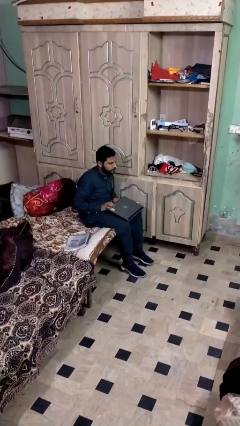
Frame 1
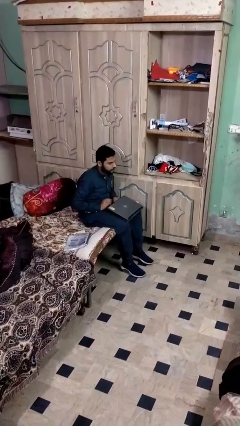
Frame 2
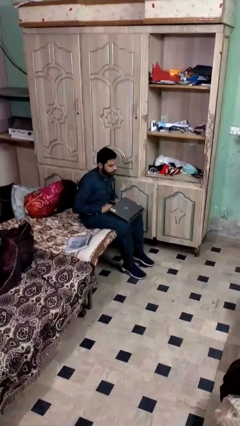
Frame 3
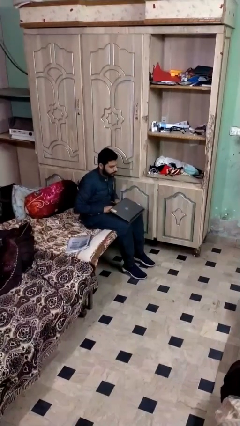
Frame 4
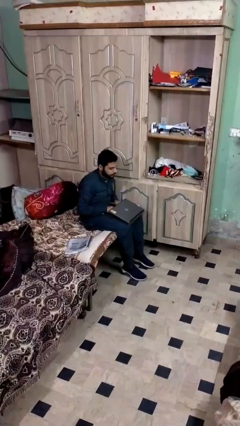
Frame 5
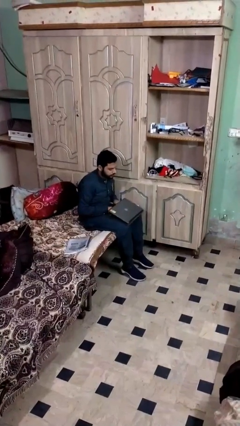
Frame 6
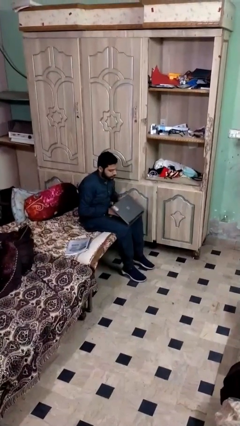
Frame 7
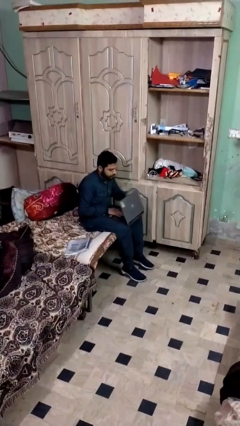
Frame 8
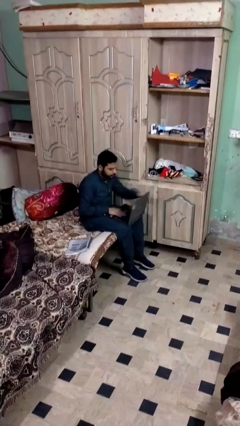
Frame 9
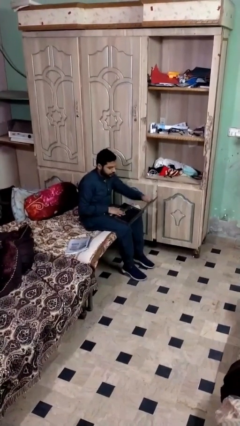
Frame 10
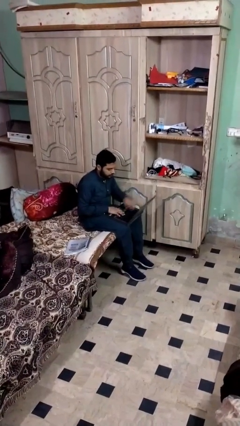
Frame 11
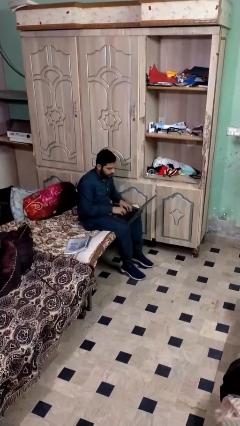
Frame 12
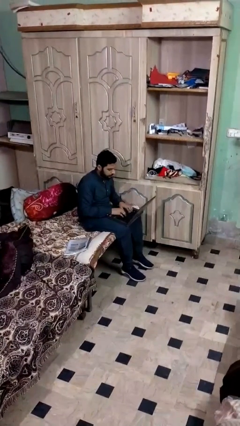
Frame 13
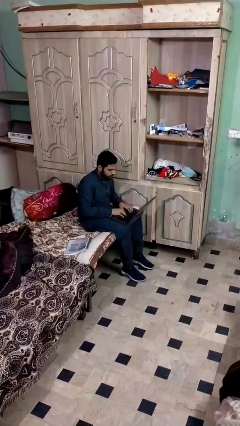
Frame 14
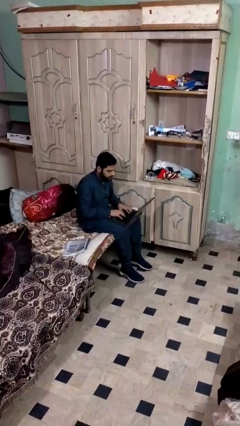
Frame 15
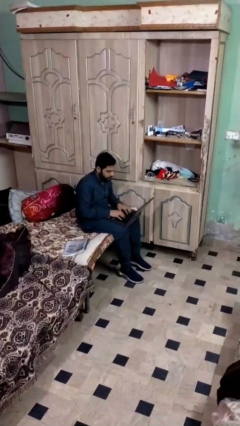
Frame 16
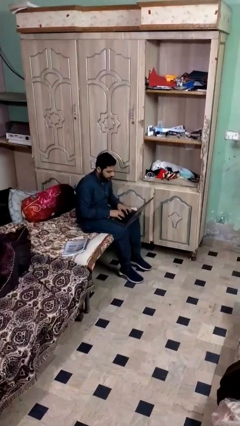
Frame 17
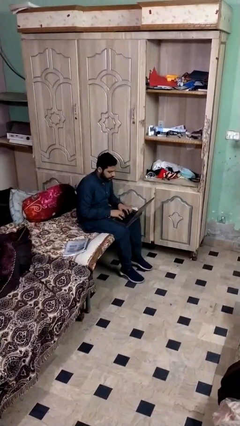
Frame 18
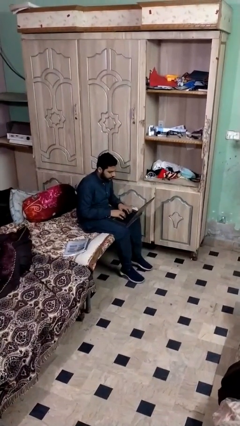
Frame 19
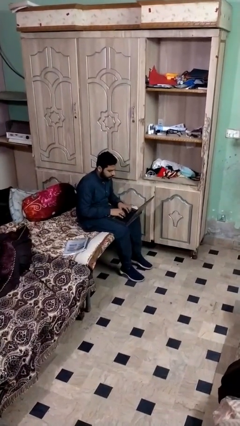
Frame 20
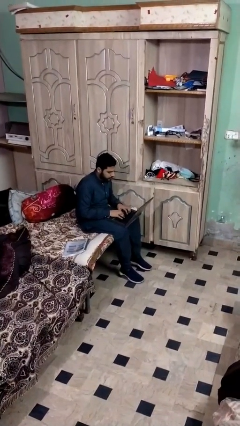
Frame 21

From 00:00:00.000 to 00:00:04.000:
person interacts with laptop

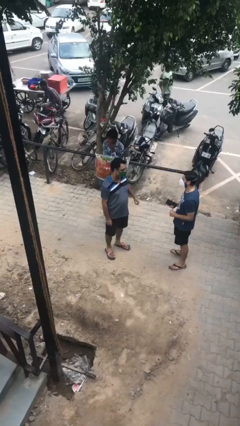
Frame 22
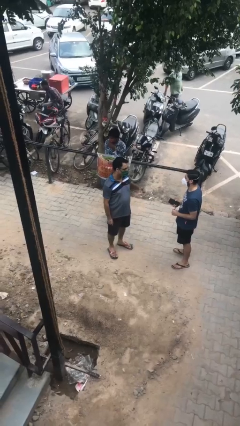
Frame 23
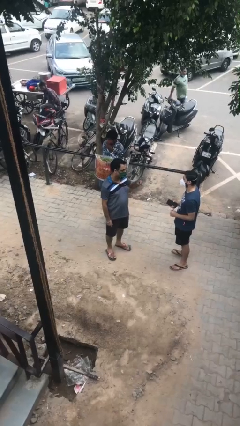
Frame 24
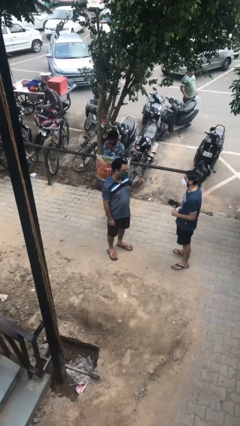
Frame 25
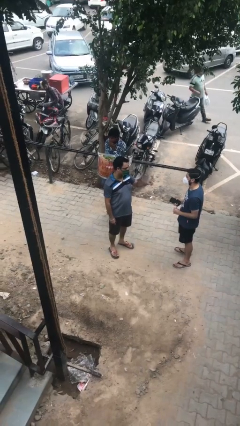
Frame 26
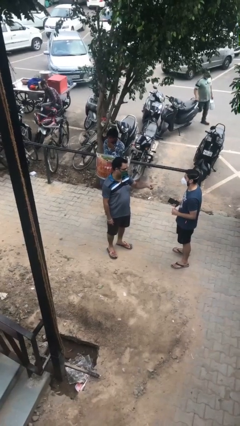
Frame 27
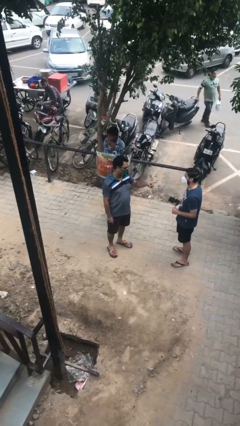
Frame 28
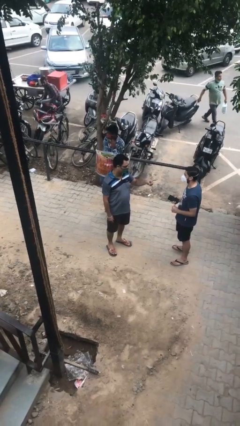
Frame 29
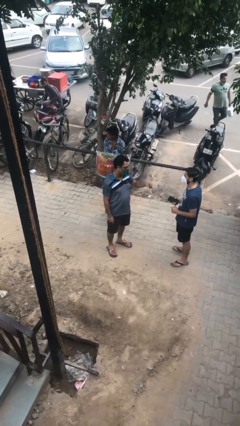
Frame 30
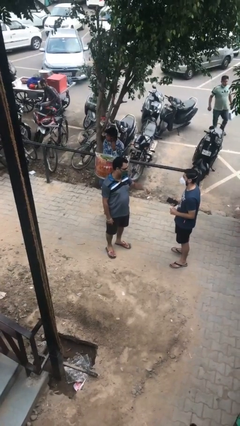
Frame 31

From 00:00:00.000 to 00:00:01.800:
person points at person

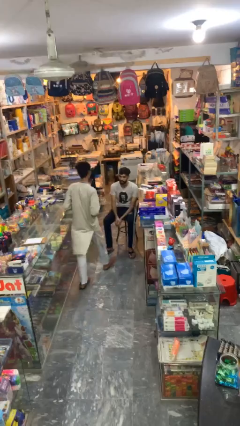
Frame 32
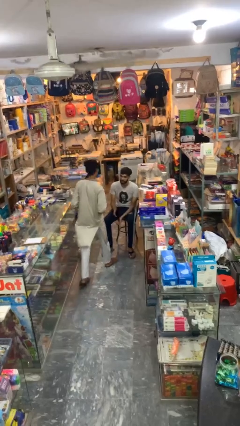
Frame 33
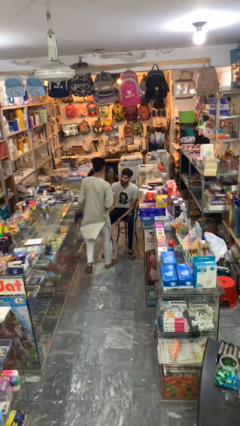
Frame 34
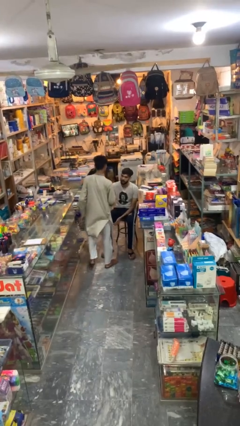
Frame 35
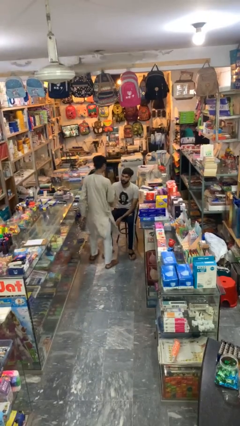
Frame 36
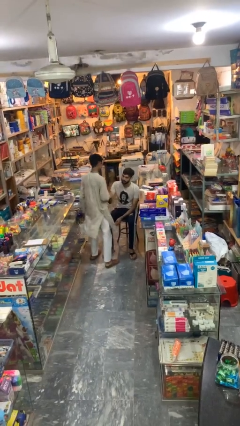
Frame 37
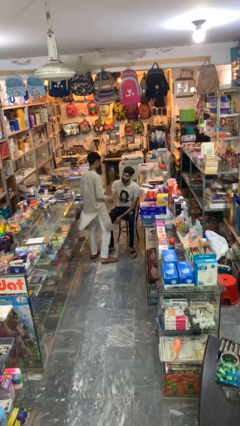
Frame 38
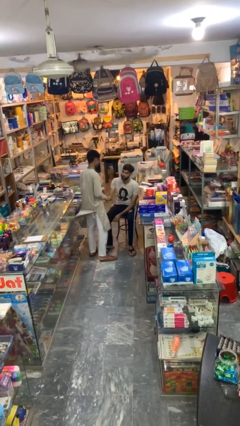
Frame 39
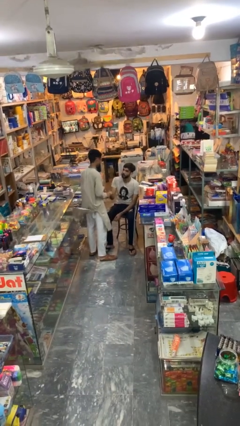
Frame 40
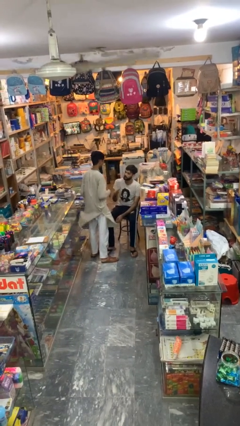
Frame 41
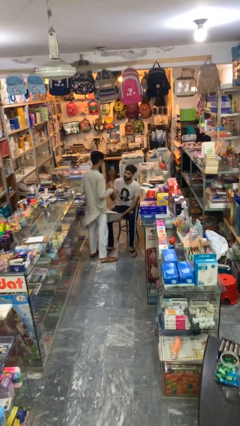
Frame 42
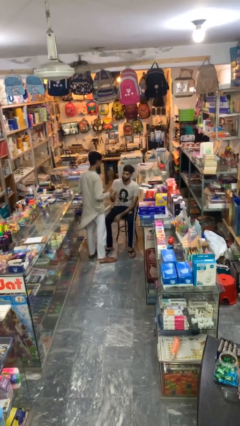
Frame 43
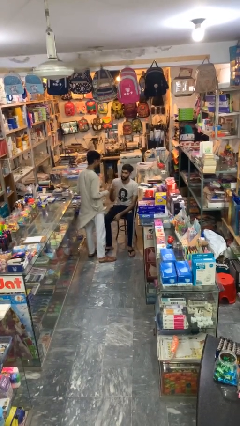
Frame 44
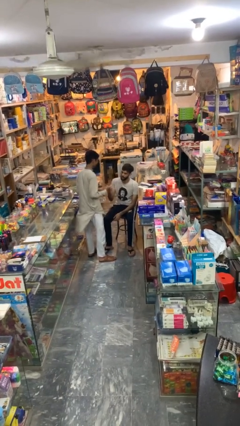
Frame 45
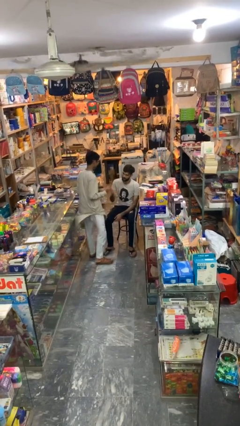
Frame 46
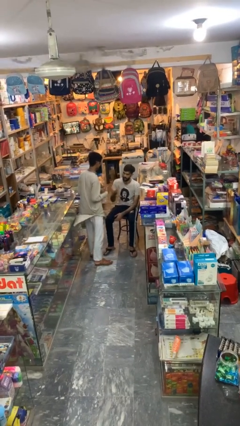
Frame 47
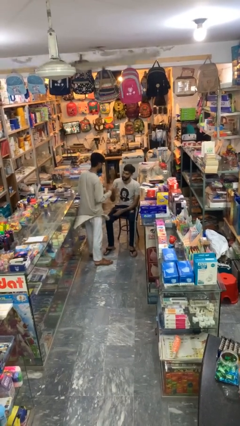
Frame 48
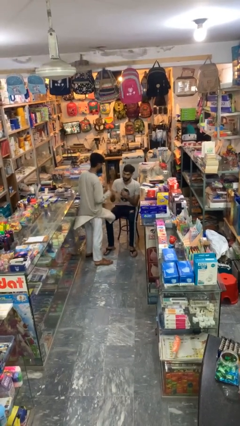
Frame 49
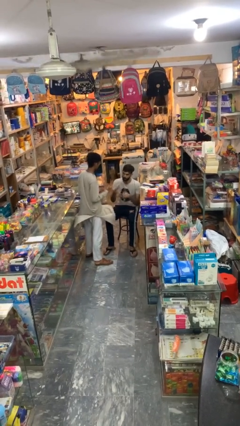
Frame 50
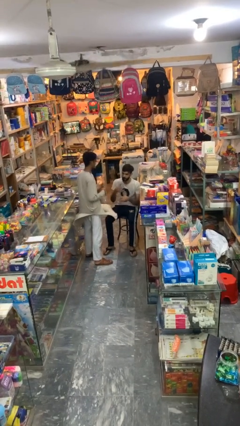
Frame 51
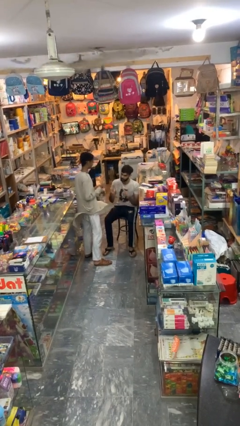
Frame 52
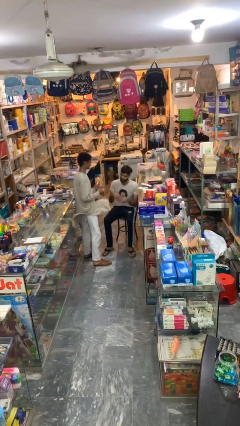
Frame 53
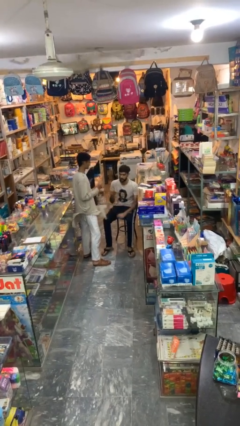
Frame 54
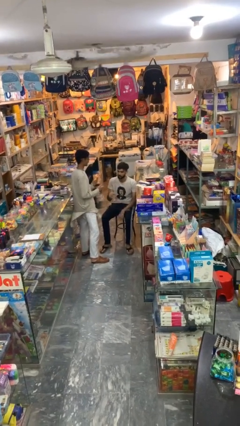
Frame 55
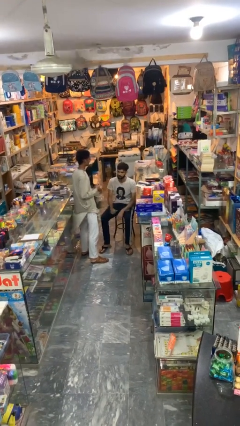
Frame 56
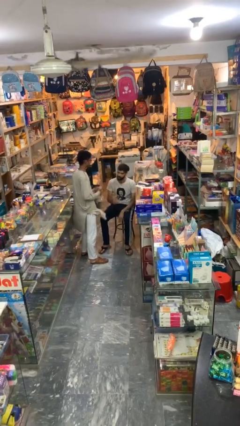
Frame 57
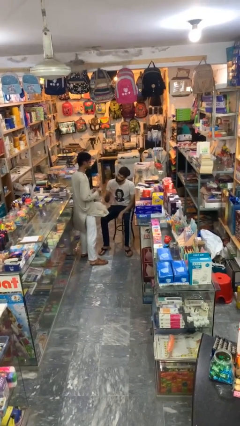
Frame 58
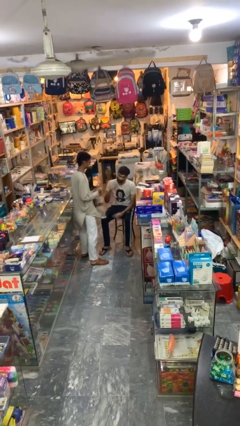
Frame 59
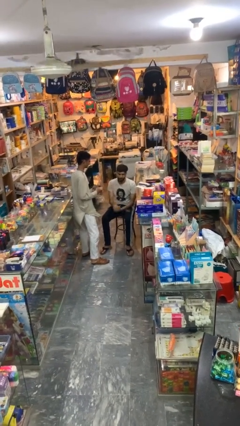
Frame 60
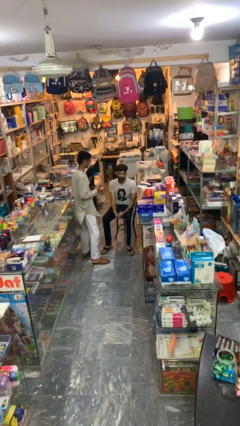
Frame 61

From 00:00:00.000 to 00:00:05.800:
person shakes hand

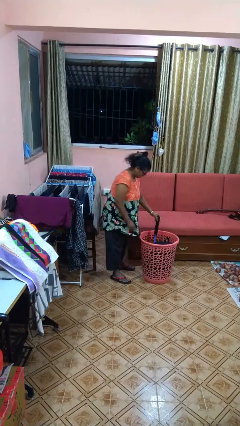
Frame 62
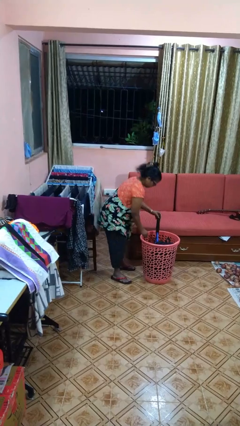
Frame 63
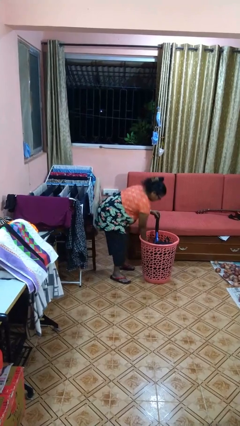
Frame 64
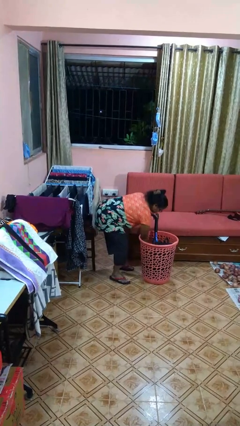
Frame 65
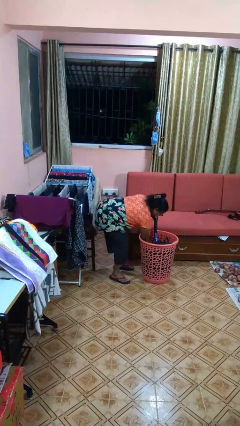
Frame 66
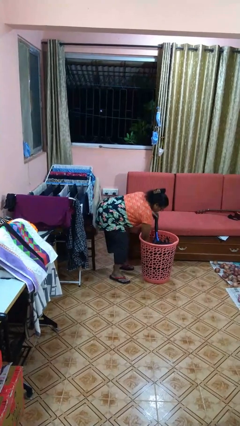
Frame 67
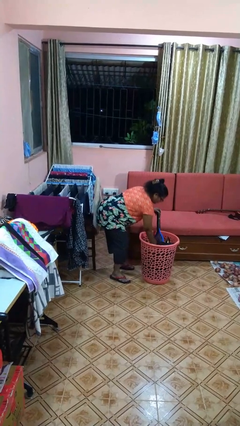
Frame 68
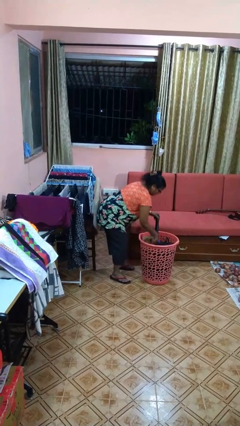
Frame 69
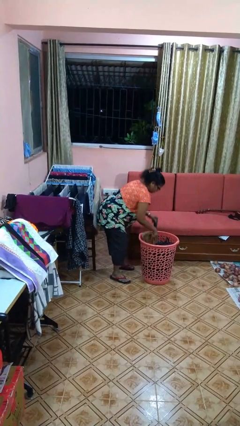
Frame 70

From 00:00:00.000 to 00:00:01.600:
person takes object from basket

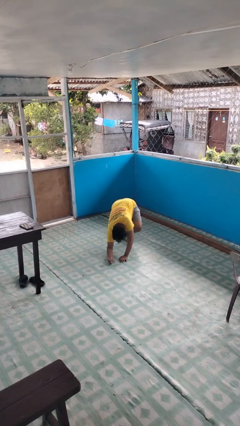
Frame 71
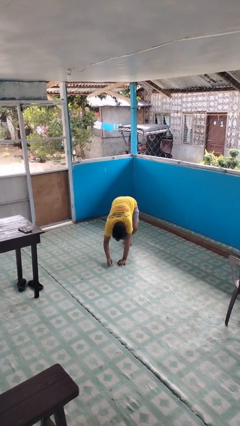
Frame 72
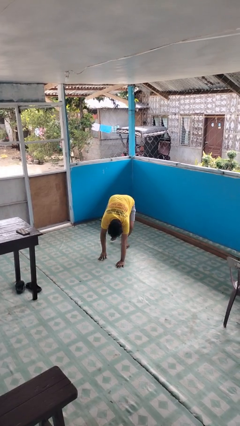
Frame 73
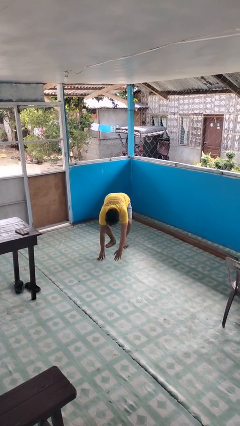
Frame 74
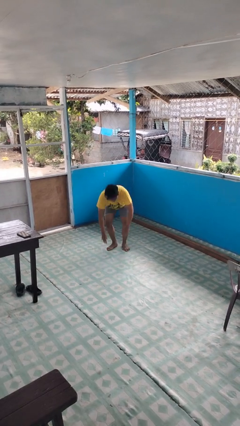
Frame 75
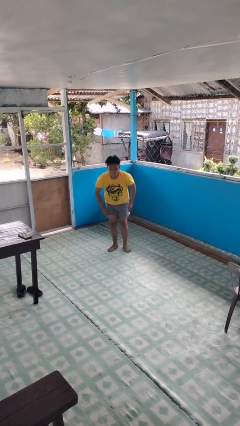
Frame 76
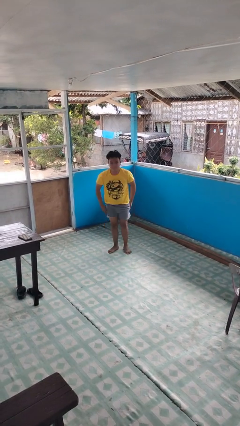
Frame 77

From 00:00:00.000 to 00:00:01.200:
person stands up from floor

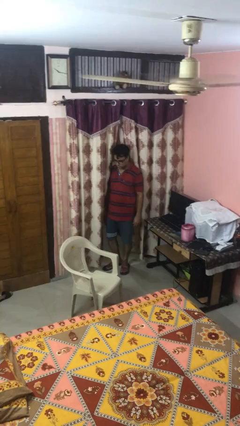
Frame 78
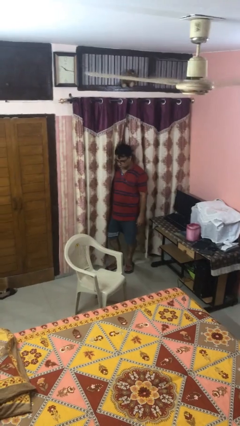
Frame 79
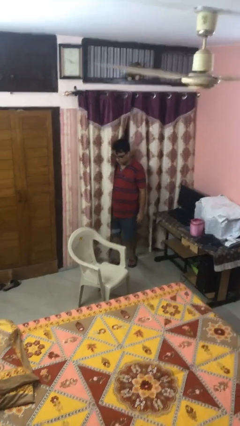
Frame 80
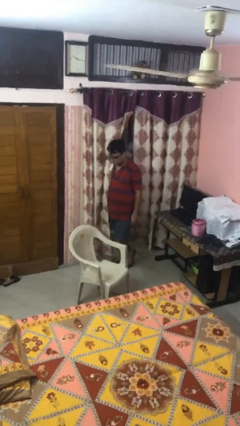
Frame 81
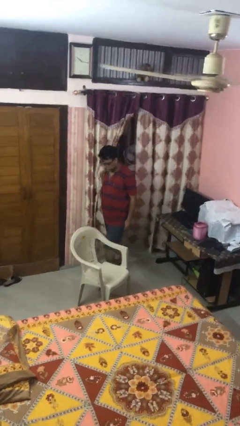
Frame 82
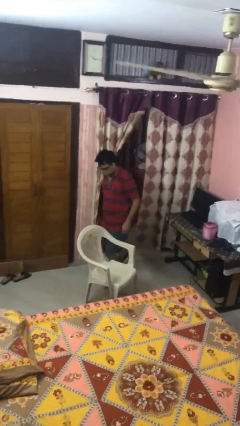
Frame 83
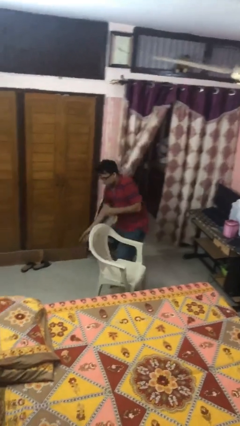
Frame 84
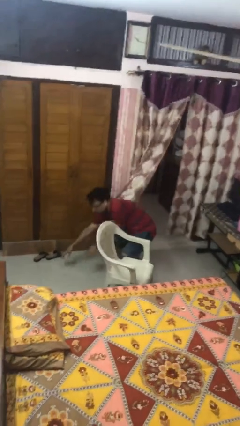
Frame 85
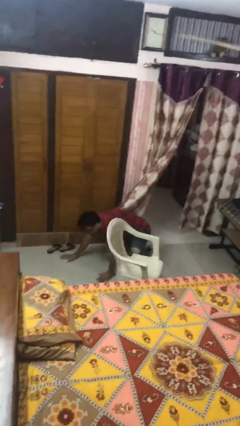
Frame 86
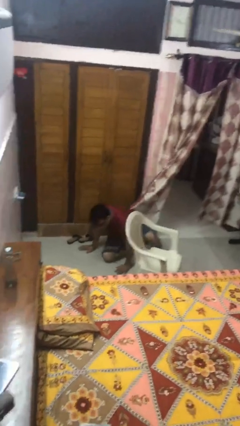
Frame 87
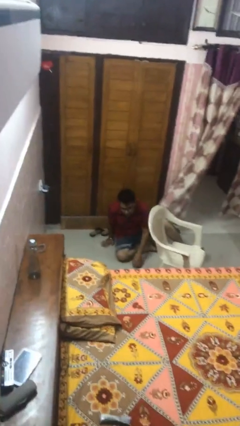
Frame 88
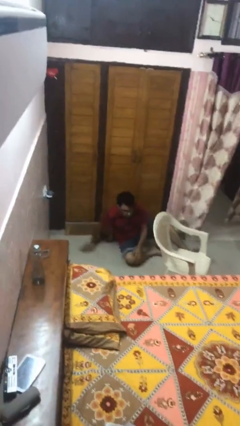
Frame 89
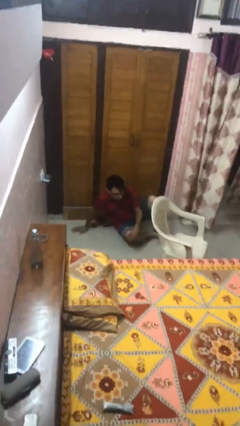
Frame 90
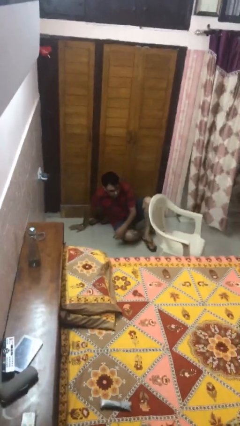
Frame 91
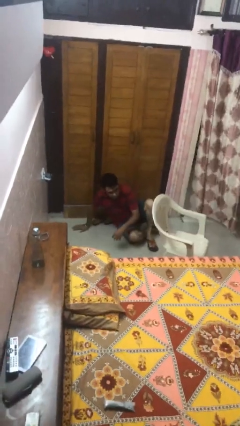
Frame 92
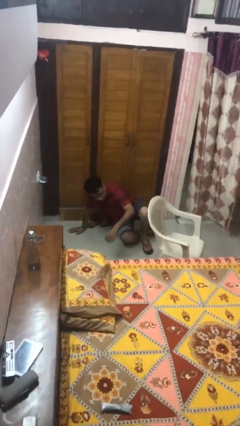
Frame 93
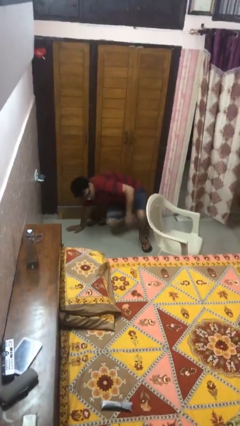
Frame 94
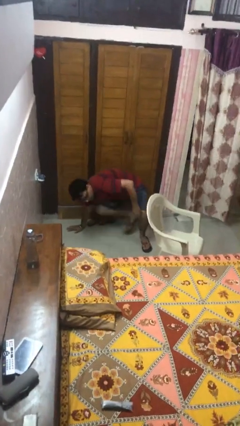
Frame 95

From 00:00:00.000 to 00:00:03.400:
person trips on object on floor
